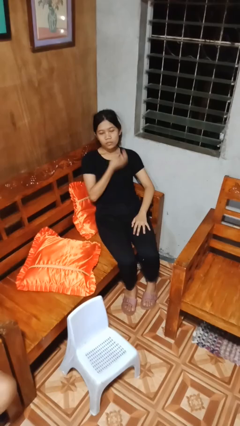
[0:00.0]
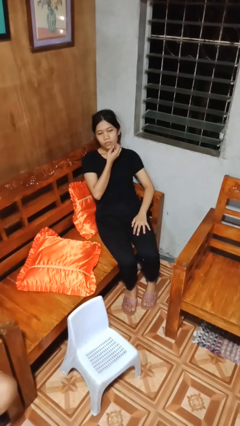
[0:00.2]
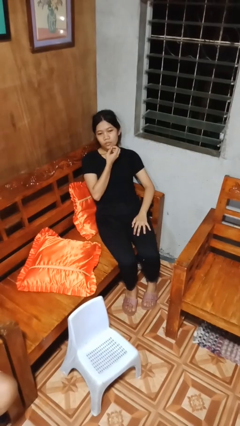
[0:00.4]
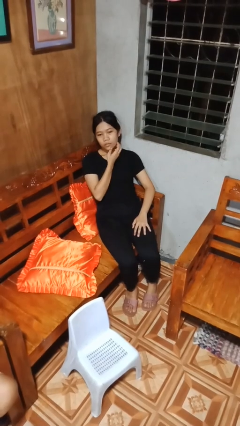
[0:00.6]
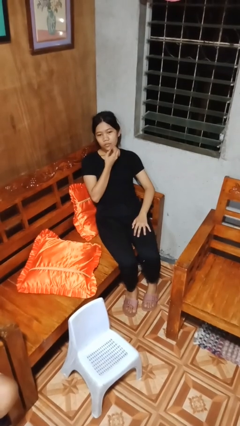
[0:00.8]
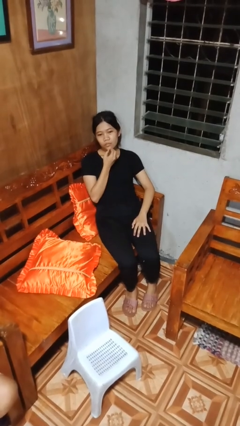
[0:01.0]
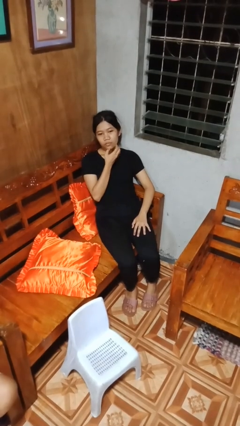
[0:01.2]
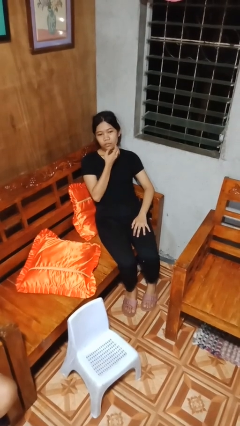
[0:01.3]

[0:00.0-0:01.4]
person strokes chin

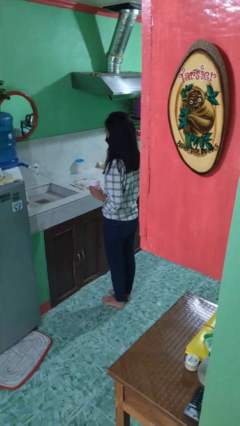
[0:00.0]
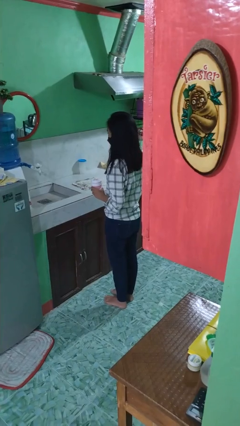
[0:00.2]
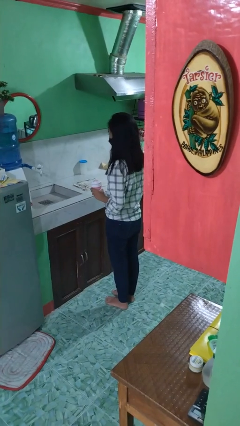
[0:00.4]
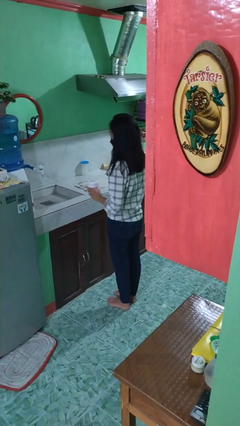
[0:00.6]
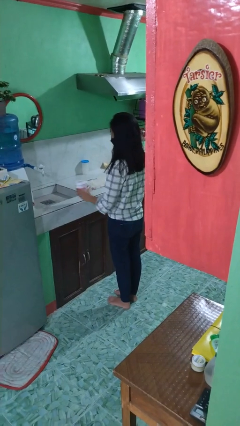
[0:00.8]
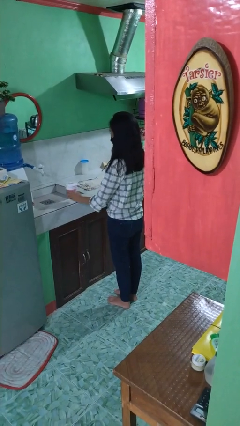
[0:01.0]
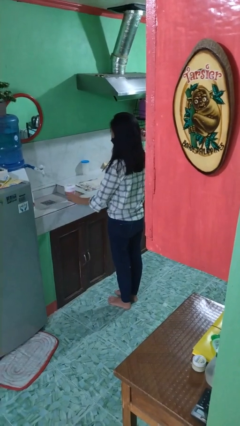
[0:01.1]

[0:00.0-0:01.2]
person puts down object on countertop

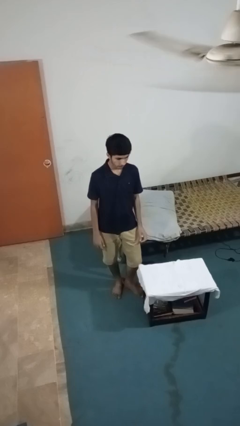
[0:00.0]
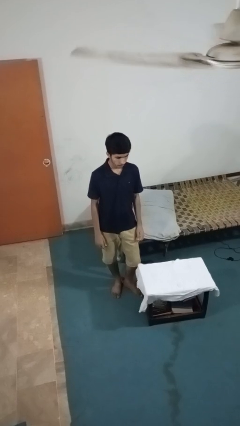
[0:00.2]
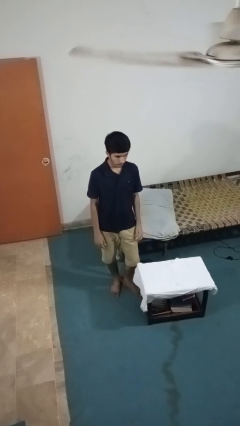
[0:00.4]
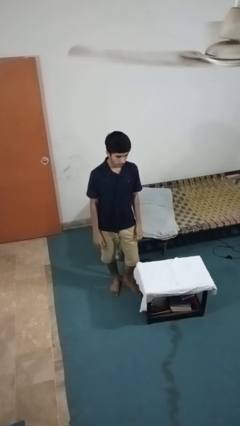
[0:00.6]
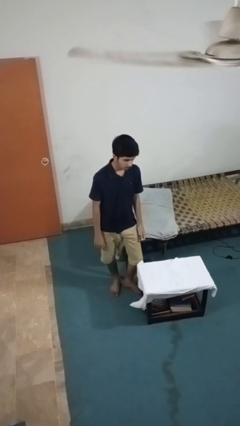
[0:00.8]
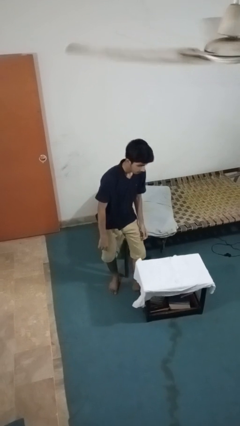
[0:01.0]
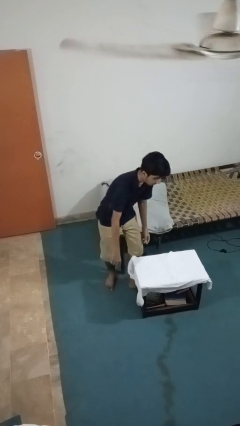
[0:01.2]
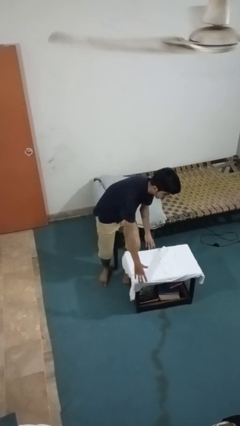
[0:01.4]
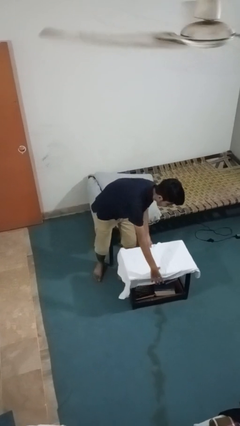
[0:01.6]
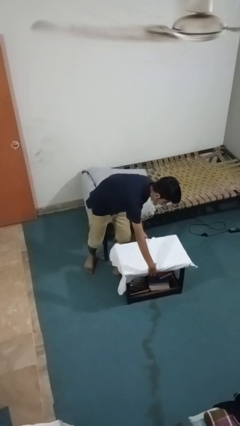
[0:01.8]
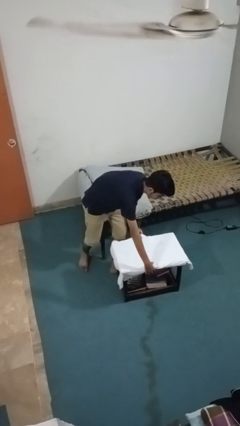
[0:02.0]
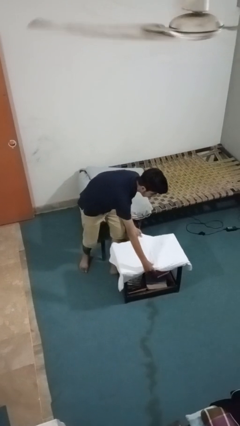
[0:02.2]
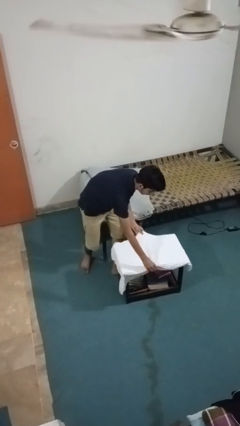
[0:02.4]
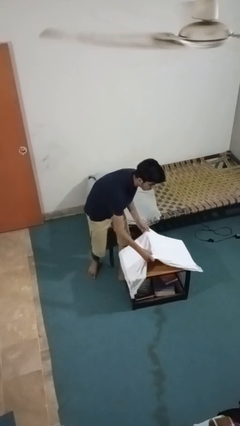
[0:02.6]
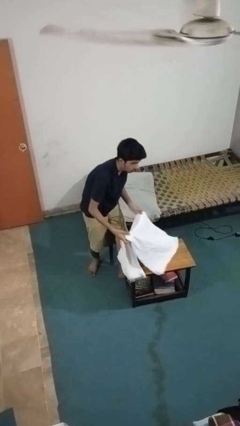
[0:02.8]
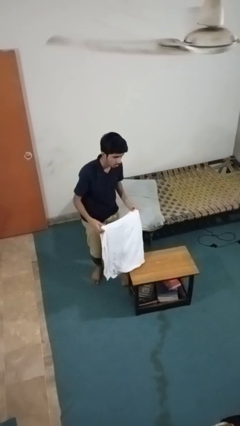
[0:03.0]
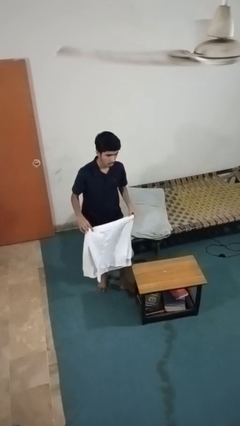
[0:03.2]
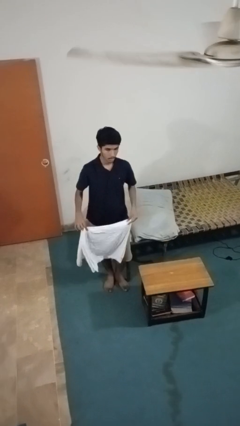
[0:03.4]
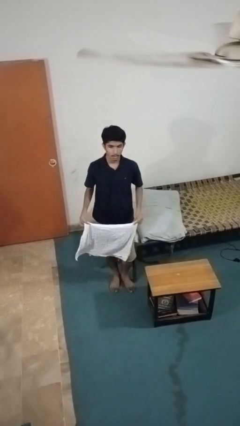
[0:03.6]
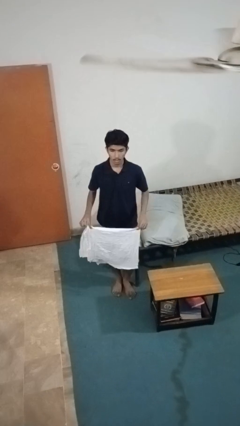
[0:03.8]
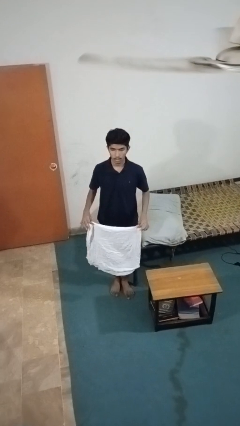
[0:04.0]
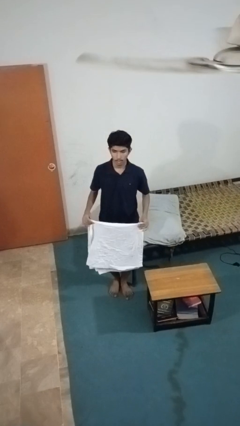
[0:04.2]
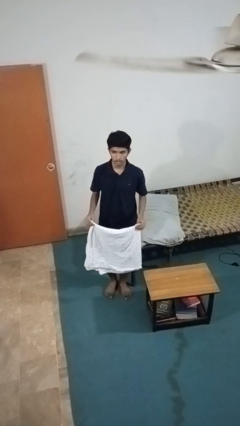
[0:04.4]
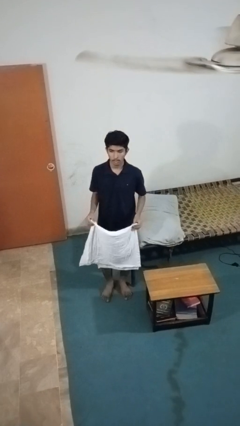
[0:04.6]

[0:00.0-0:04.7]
person folds tablecloth

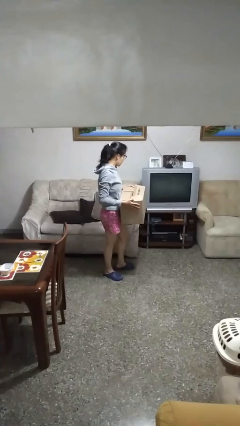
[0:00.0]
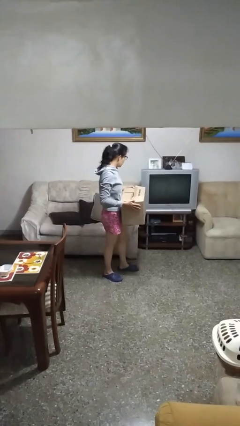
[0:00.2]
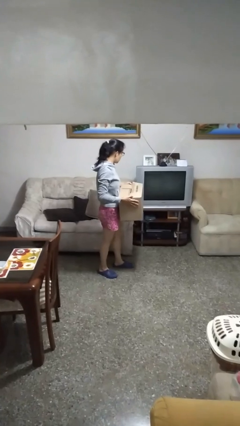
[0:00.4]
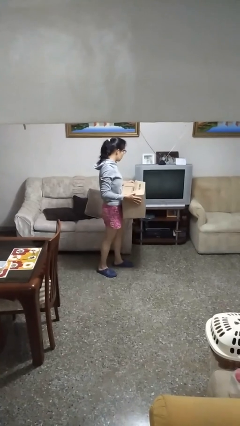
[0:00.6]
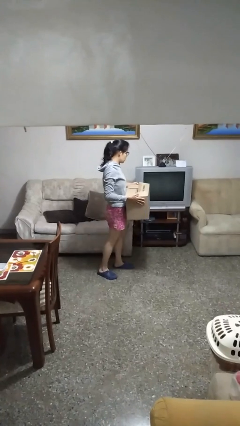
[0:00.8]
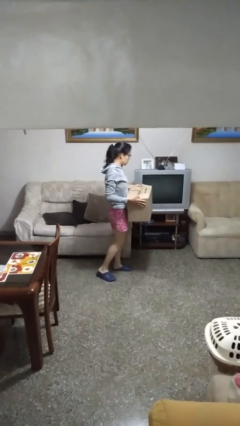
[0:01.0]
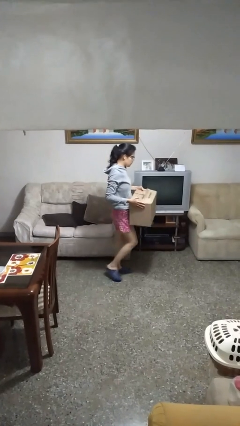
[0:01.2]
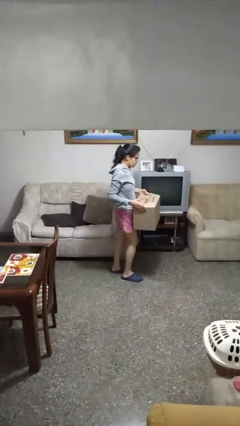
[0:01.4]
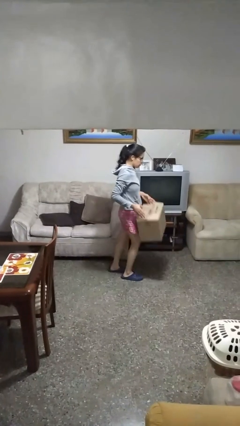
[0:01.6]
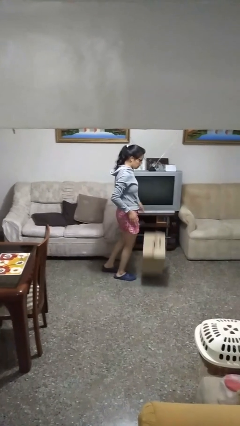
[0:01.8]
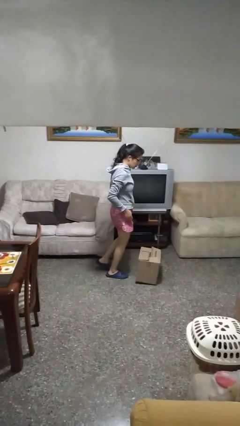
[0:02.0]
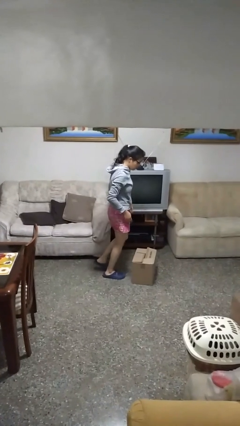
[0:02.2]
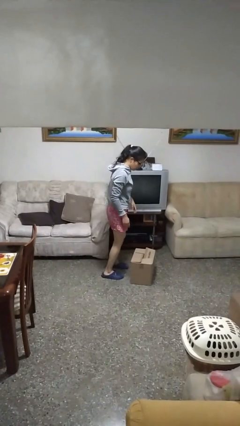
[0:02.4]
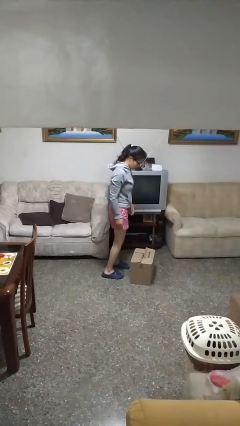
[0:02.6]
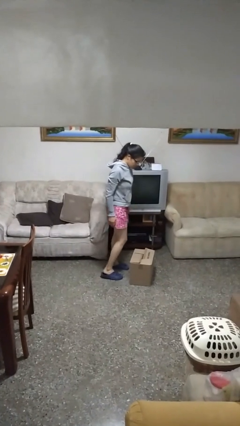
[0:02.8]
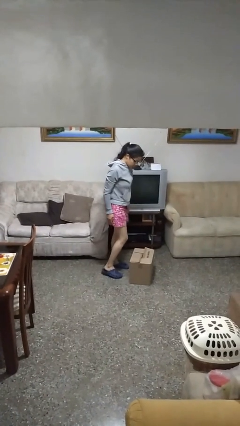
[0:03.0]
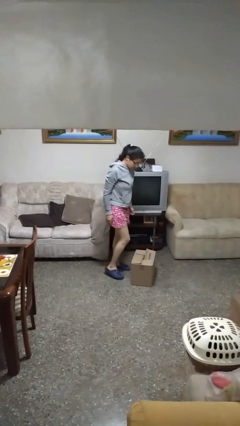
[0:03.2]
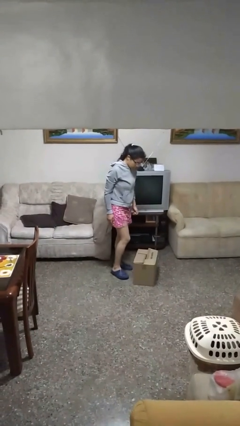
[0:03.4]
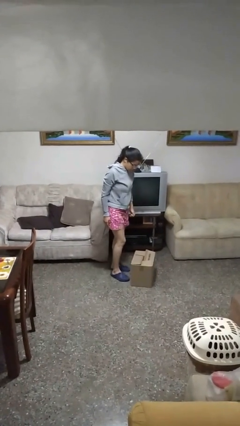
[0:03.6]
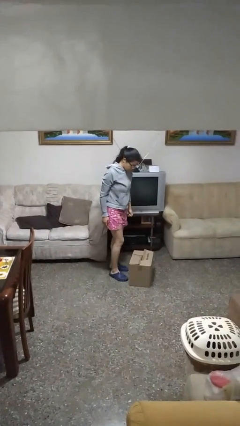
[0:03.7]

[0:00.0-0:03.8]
person drops object

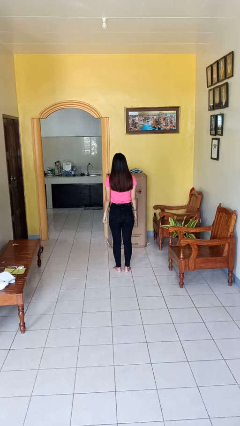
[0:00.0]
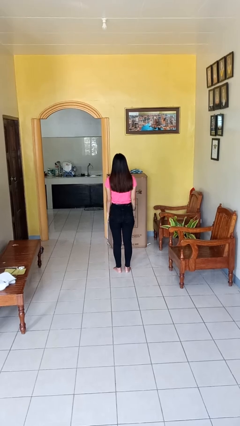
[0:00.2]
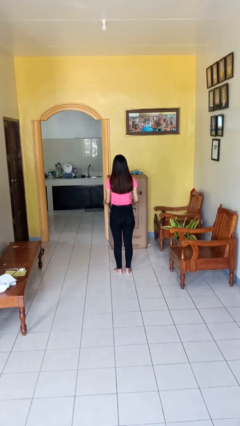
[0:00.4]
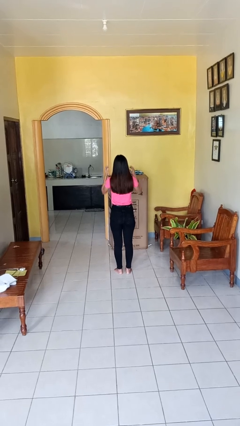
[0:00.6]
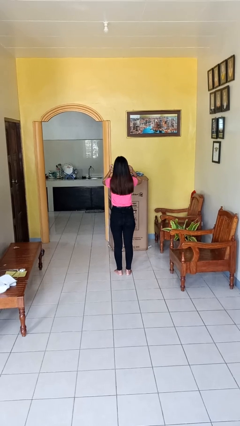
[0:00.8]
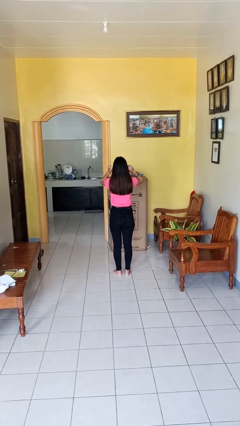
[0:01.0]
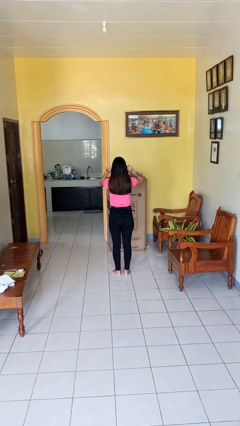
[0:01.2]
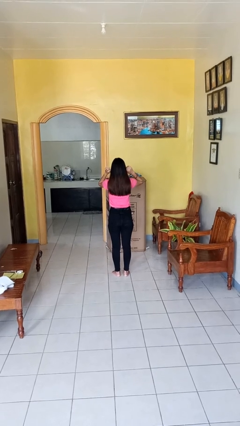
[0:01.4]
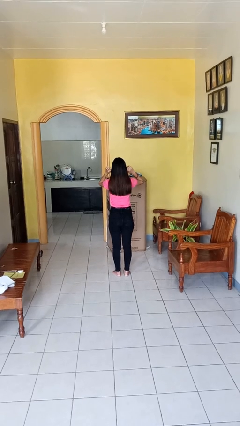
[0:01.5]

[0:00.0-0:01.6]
person puts fingers in ear

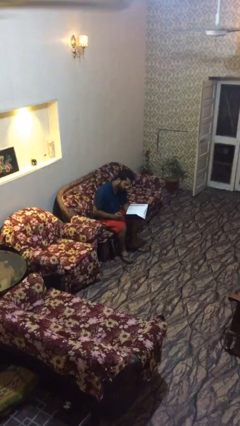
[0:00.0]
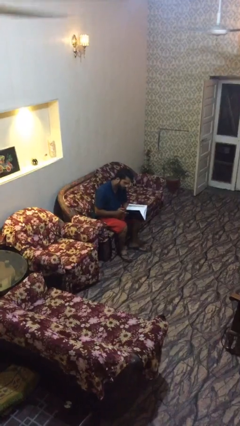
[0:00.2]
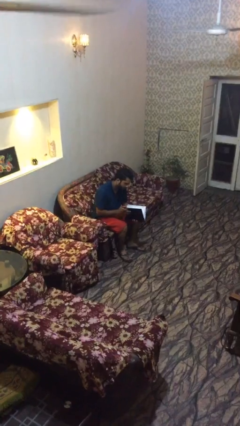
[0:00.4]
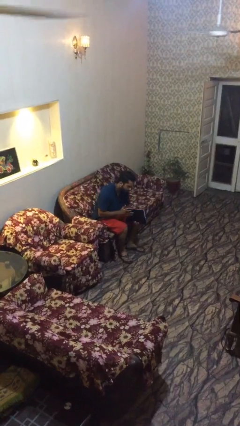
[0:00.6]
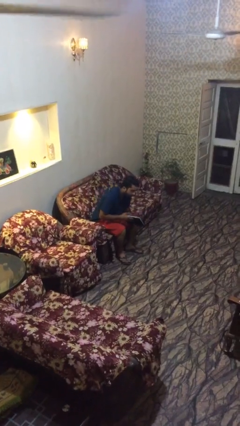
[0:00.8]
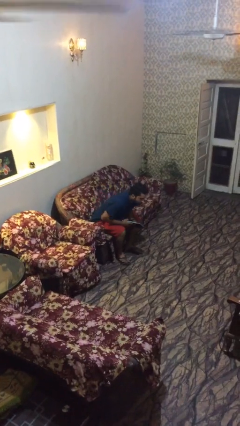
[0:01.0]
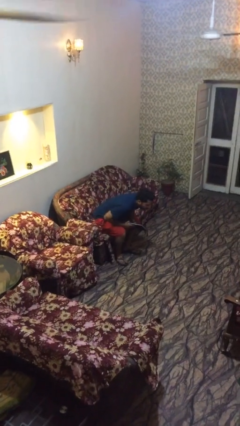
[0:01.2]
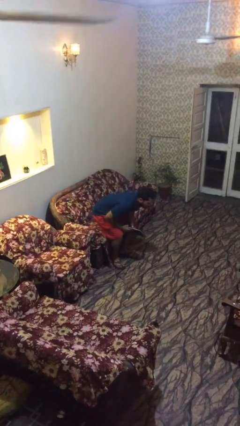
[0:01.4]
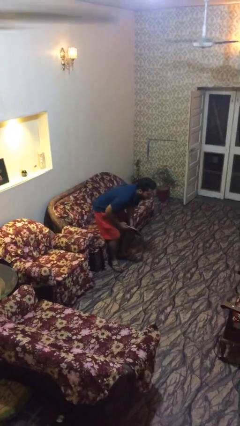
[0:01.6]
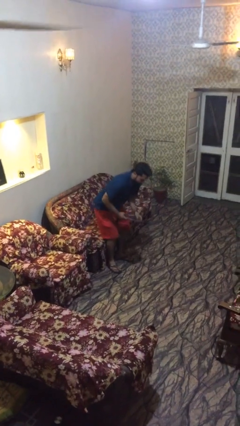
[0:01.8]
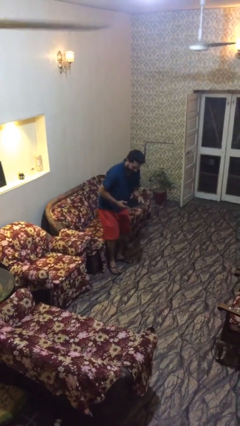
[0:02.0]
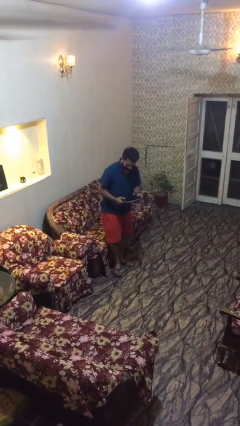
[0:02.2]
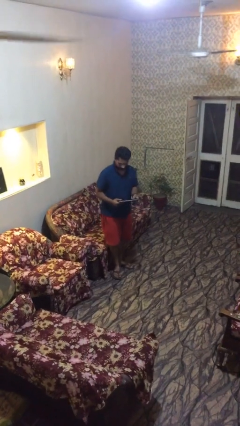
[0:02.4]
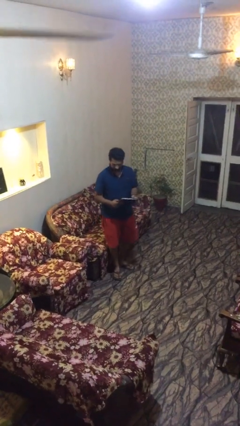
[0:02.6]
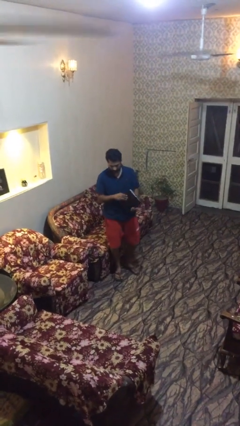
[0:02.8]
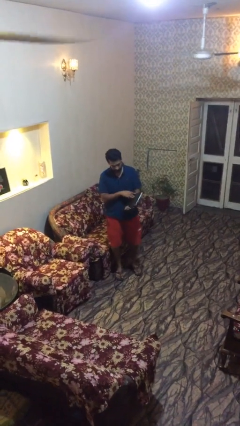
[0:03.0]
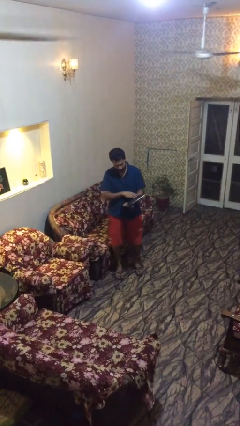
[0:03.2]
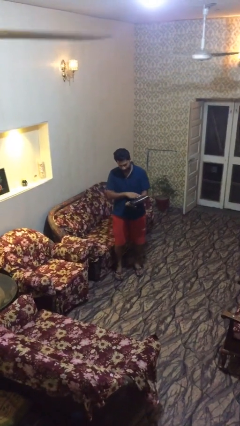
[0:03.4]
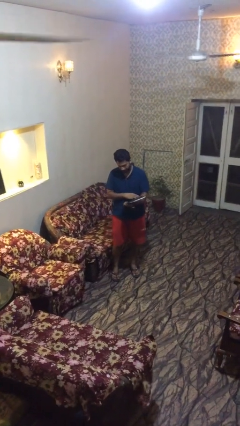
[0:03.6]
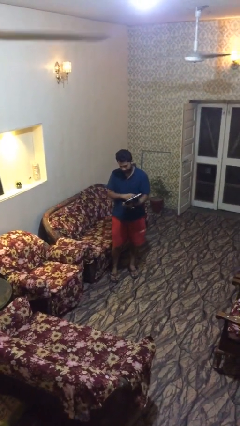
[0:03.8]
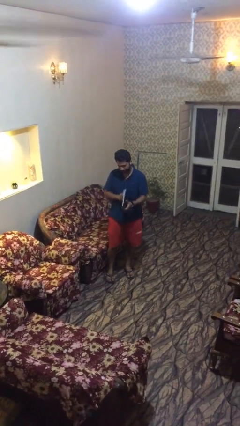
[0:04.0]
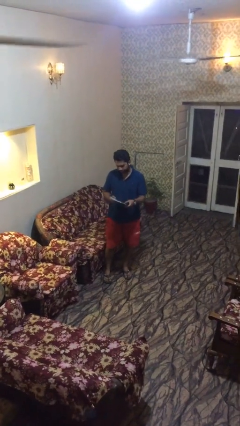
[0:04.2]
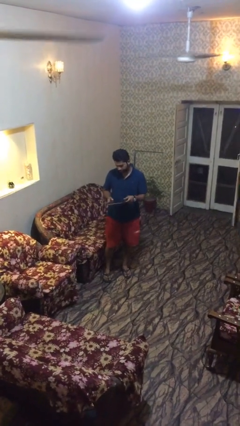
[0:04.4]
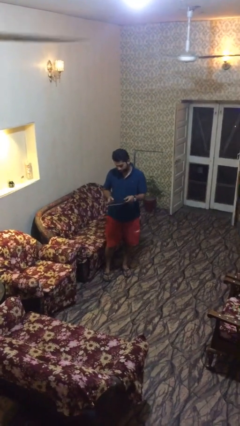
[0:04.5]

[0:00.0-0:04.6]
person stands up
